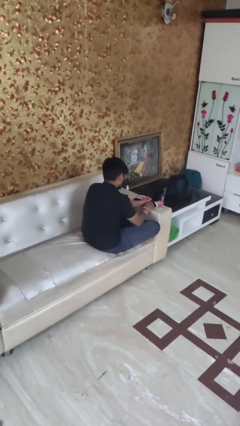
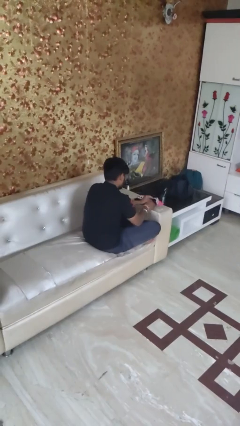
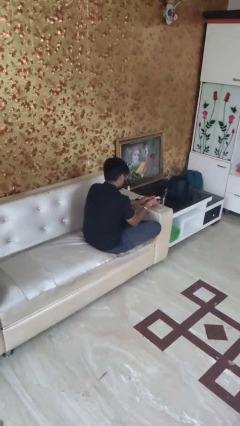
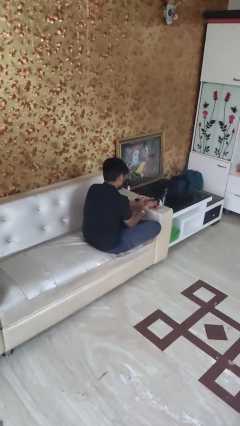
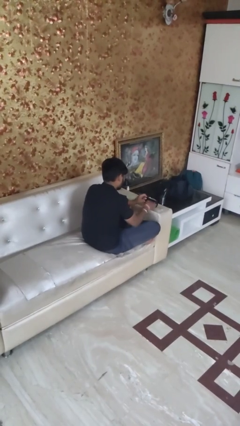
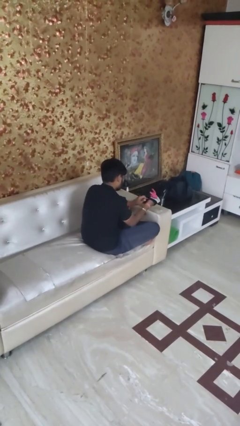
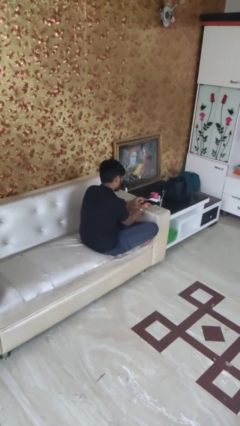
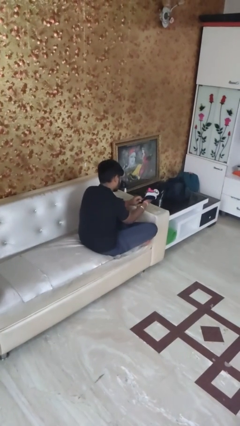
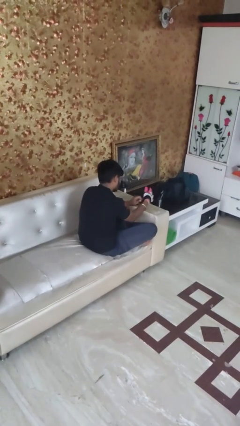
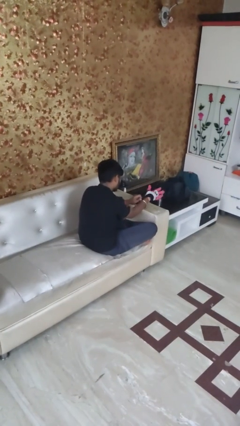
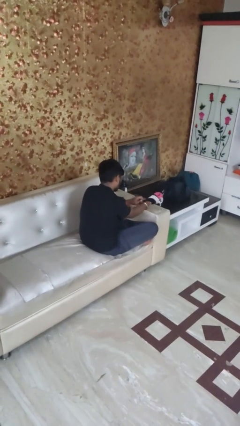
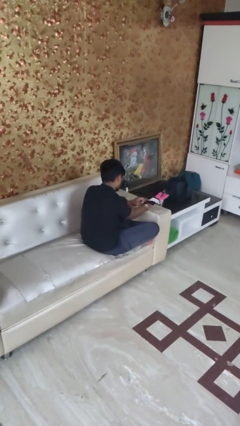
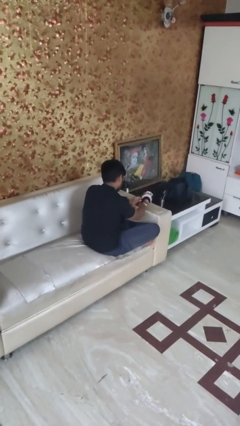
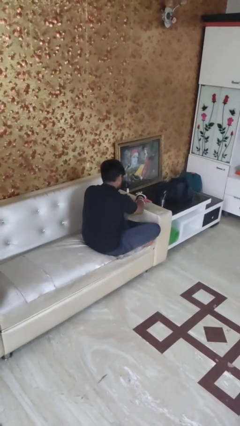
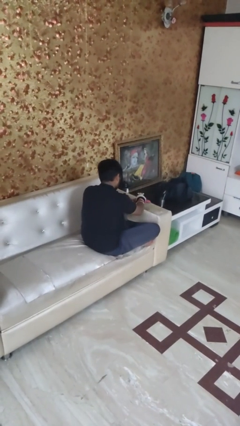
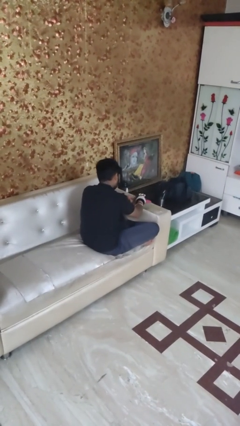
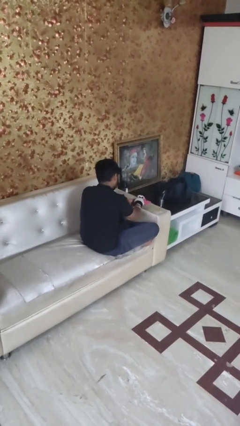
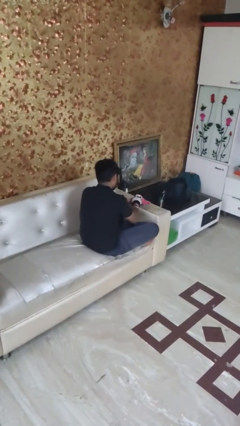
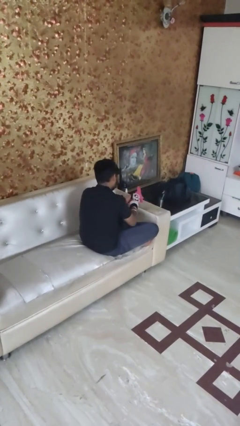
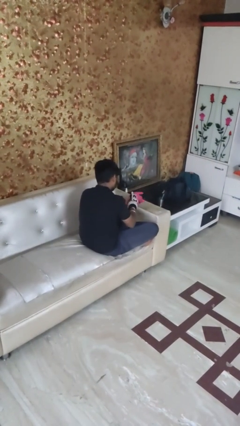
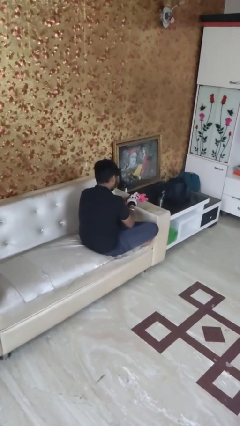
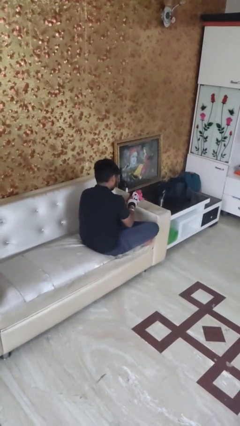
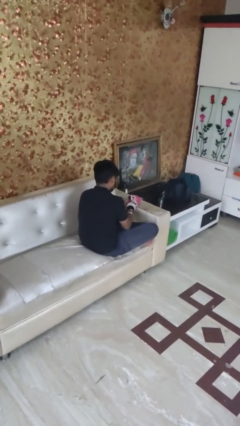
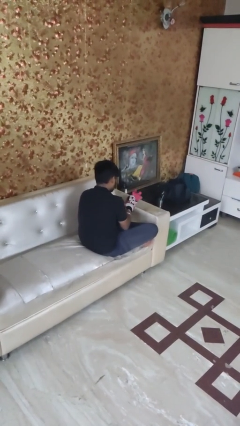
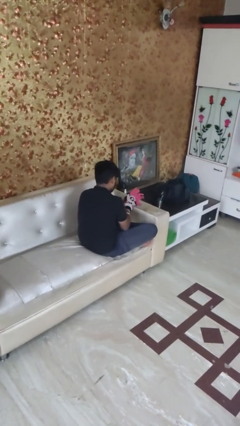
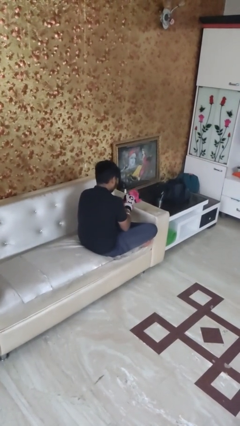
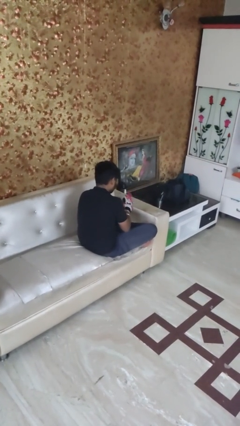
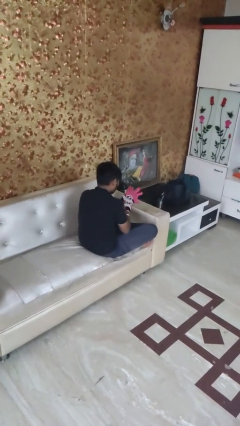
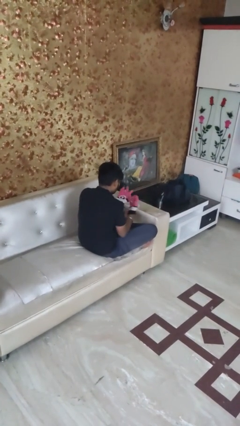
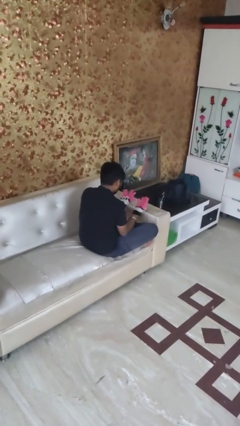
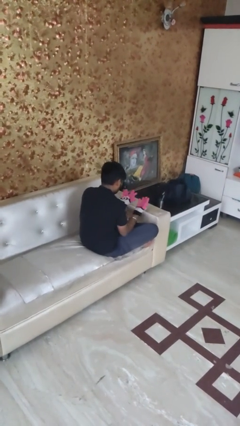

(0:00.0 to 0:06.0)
person puts on gloves

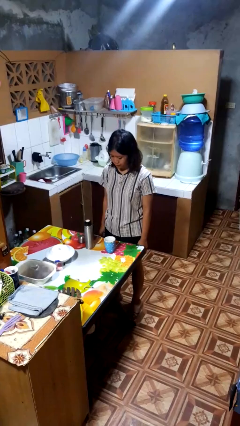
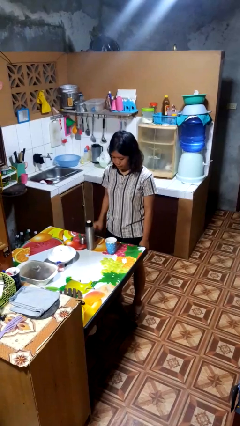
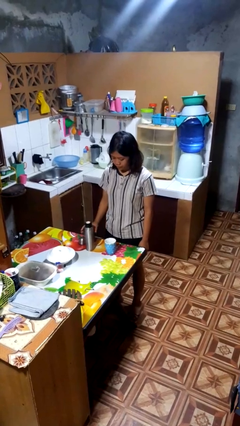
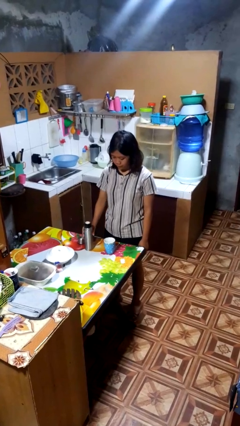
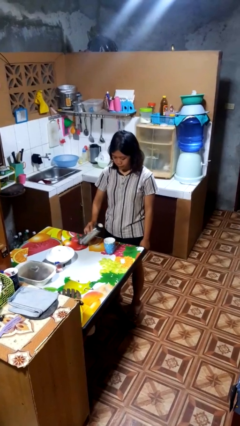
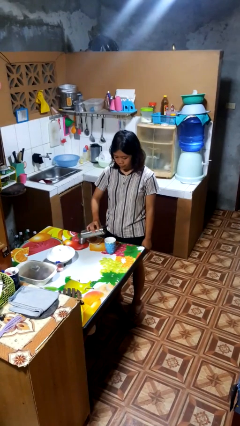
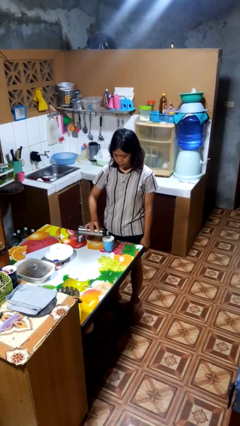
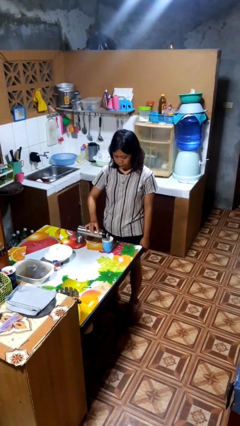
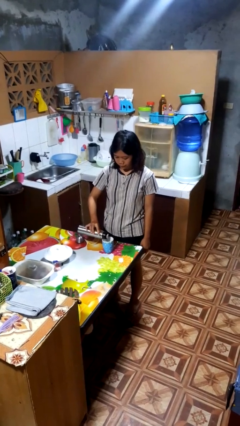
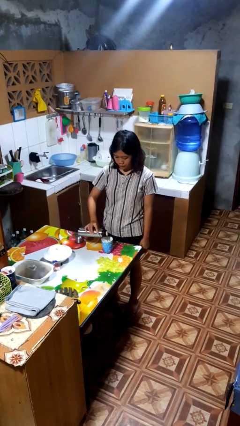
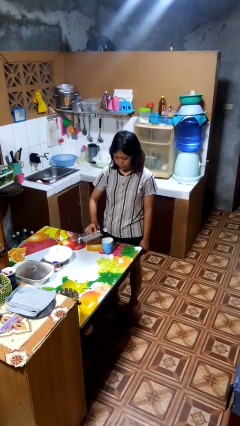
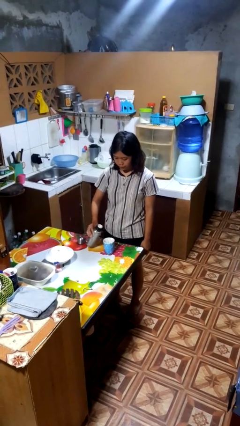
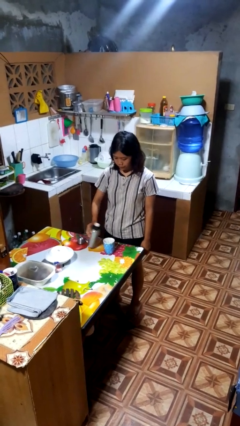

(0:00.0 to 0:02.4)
person pours coffee into mug

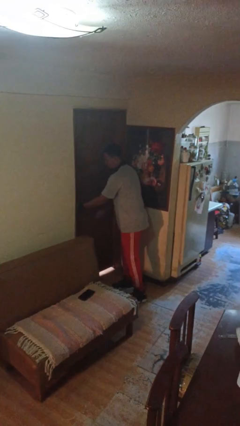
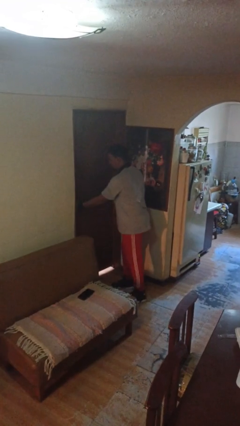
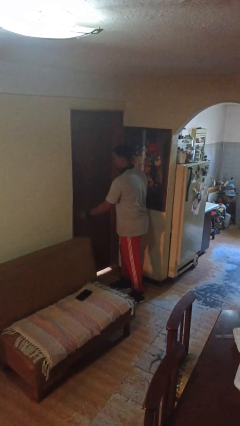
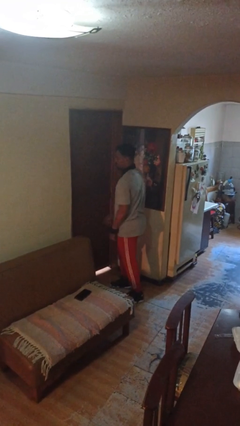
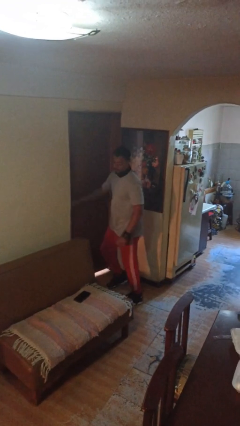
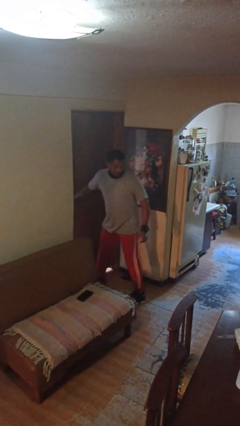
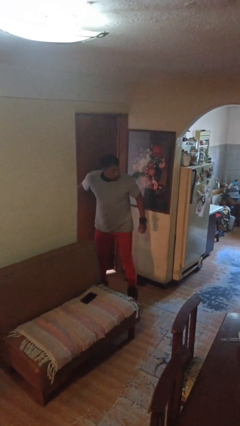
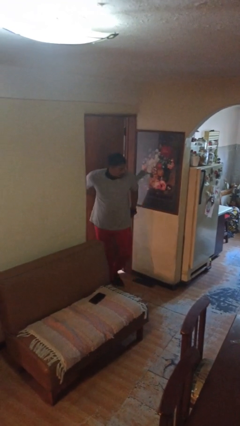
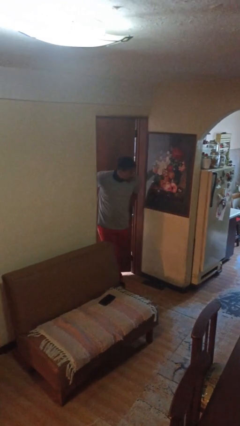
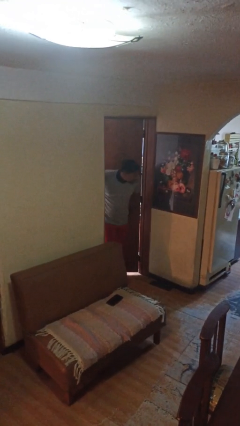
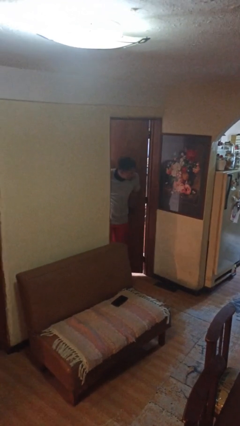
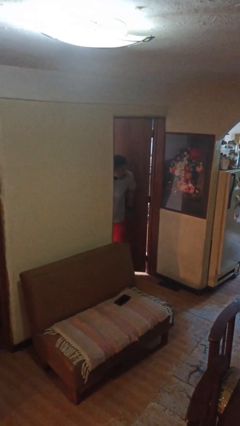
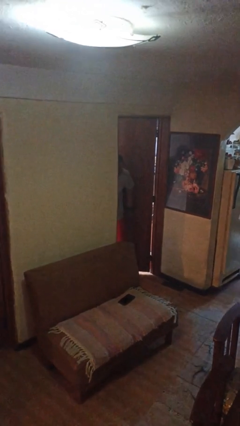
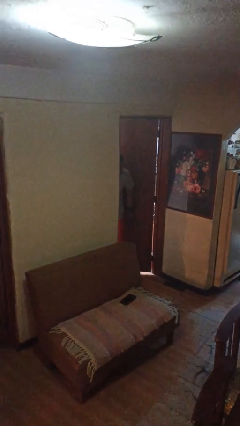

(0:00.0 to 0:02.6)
person opens facility door

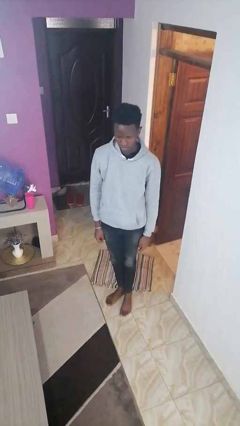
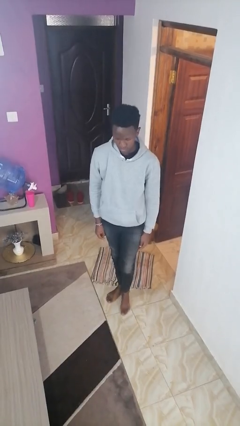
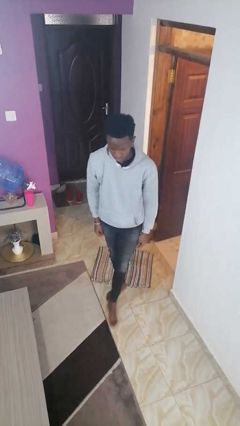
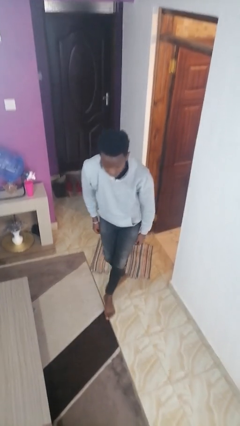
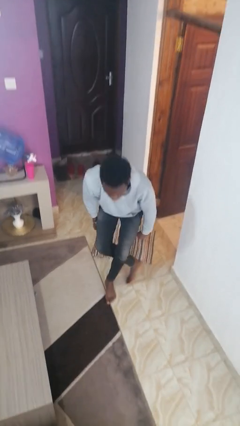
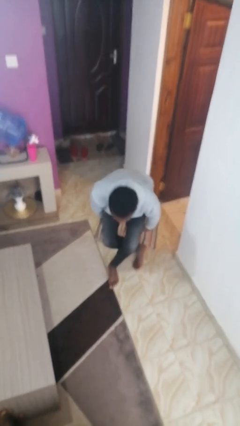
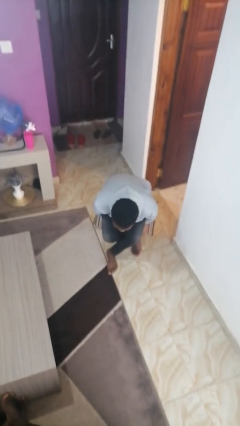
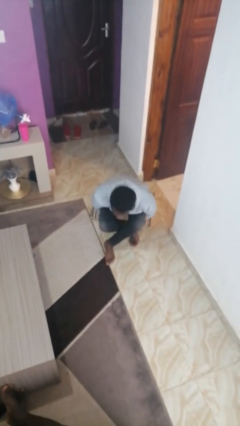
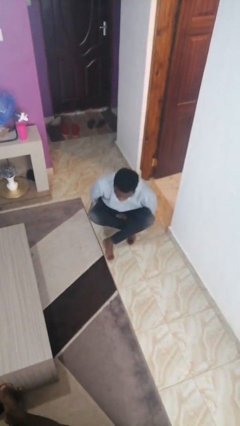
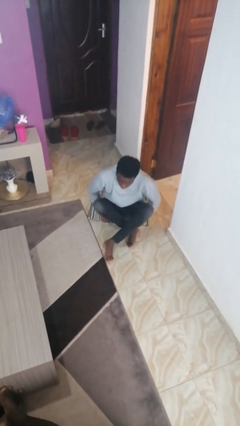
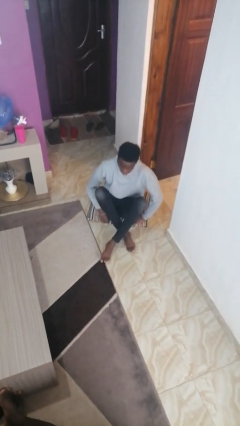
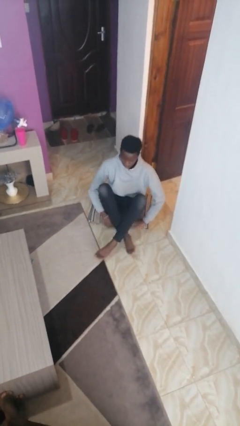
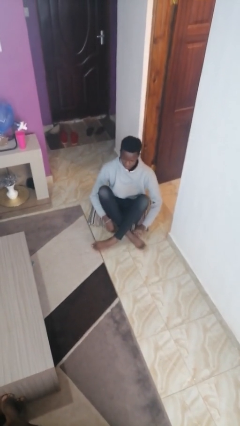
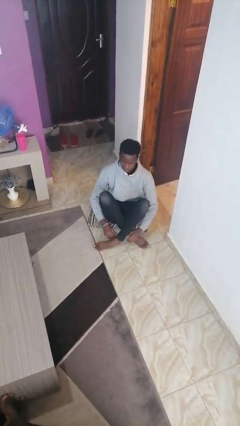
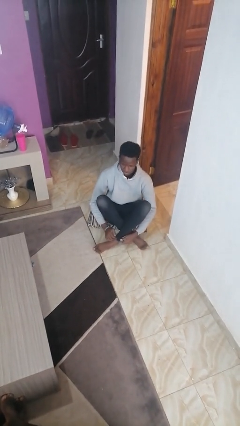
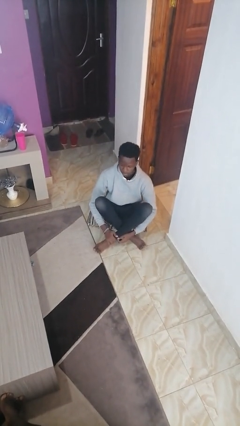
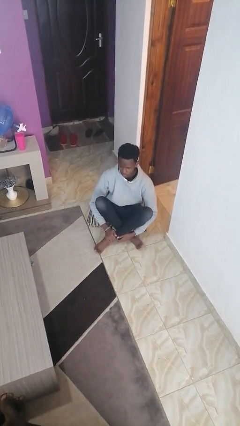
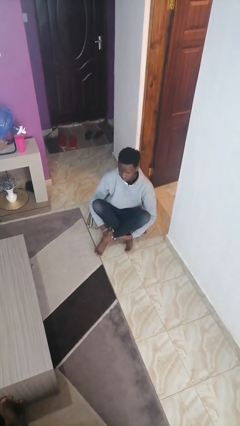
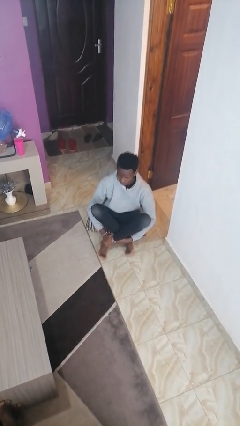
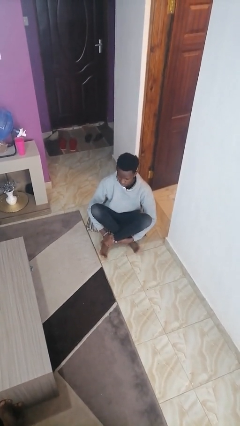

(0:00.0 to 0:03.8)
person sits crisscross

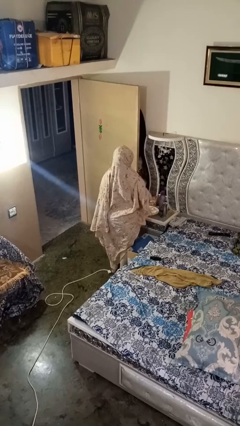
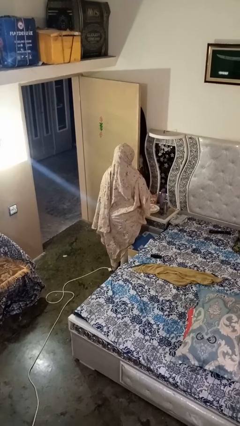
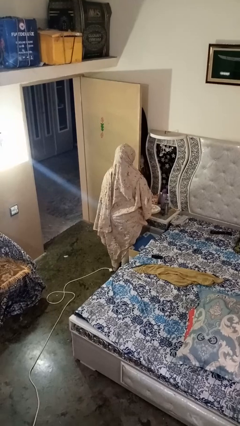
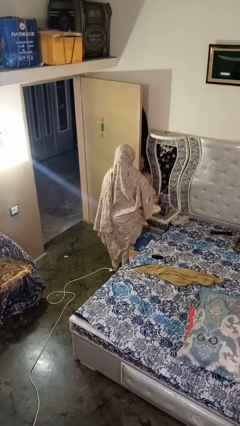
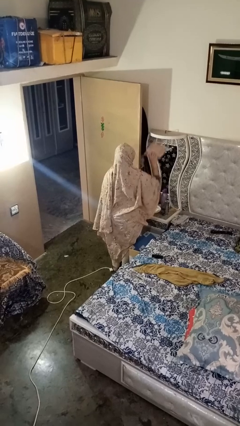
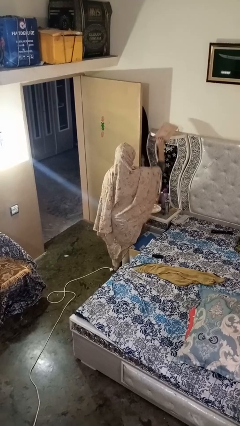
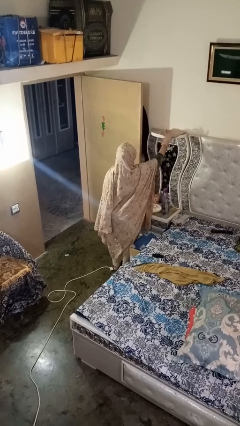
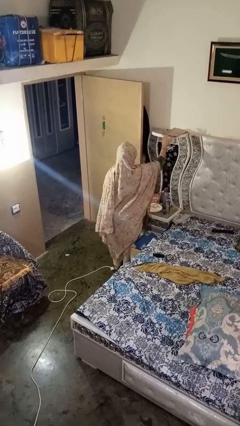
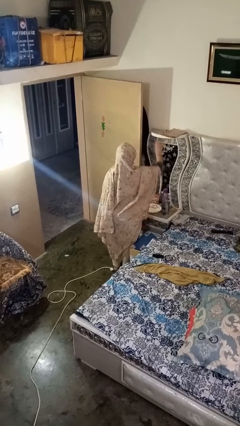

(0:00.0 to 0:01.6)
person puts down object on shelf

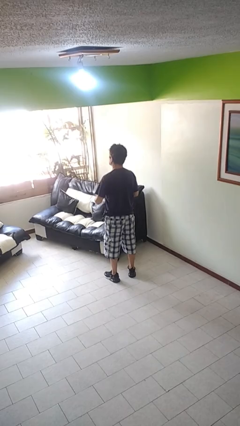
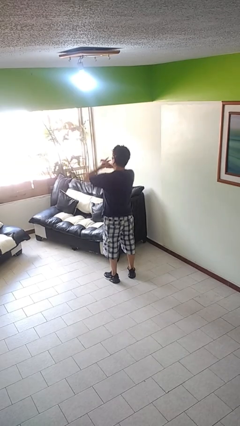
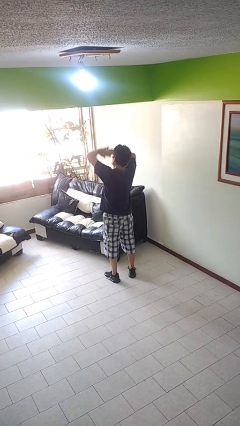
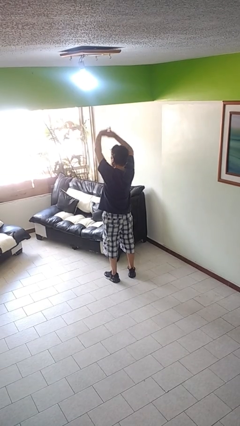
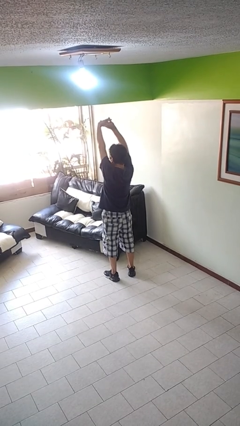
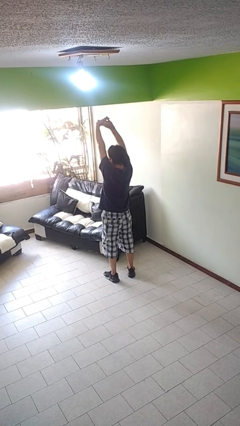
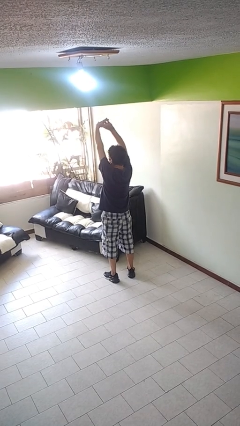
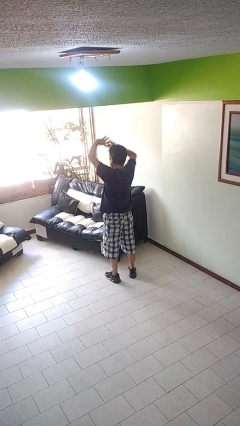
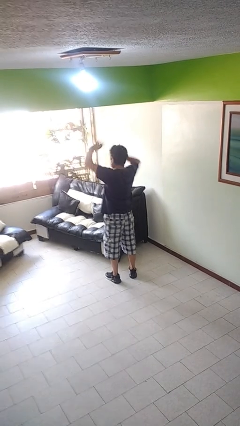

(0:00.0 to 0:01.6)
person stretches arms over head
